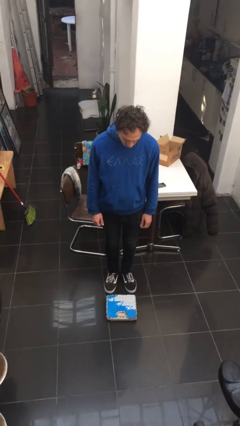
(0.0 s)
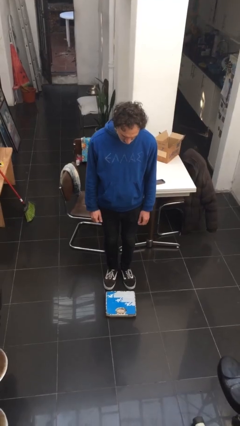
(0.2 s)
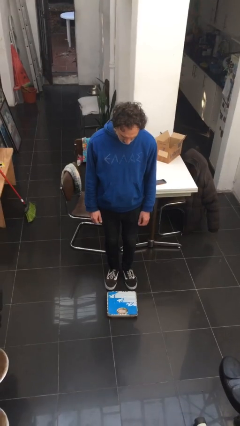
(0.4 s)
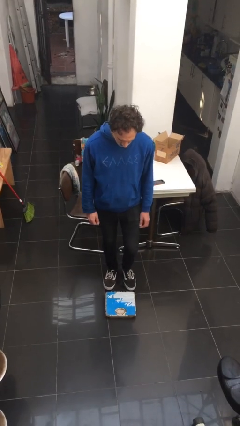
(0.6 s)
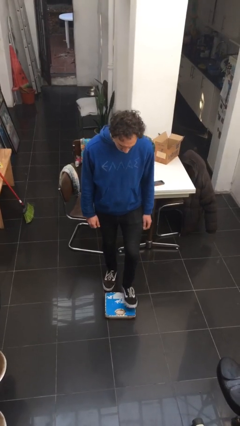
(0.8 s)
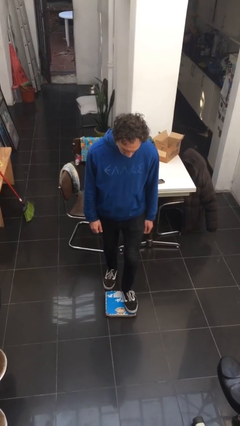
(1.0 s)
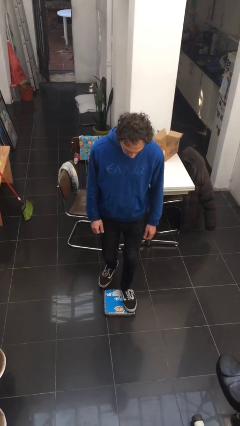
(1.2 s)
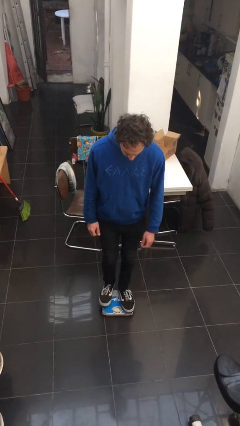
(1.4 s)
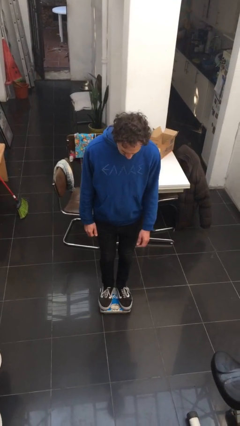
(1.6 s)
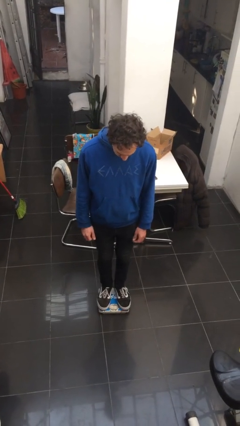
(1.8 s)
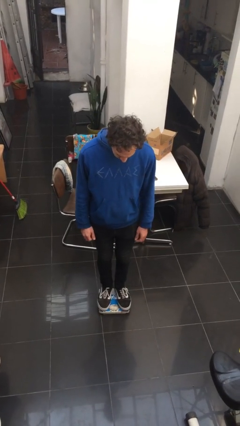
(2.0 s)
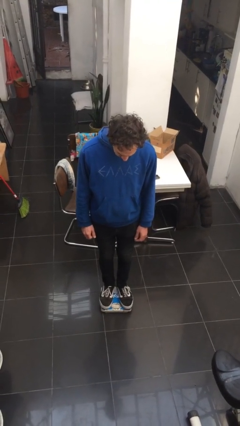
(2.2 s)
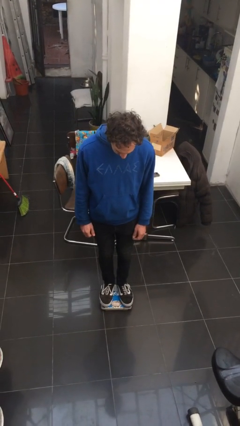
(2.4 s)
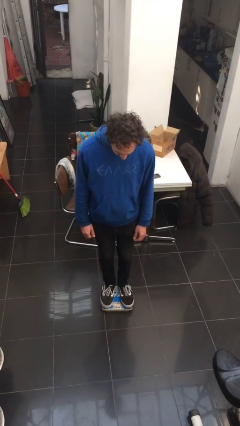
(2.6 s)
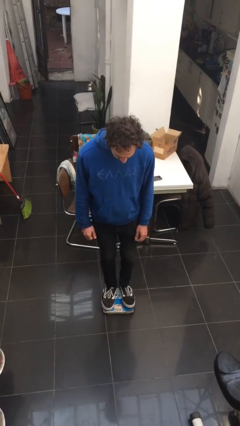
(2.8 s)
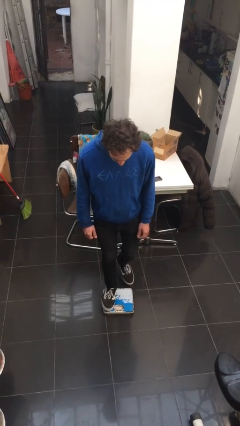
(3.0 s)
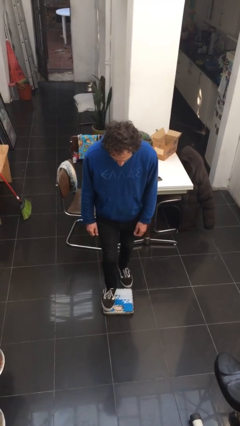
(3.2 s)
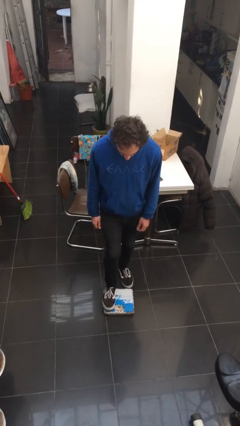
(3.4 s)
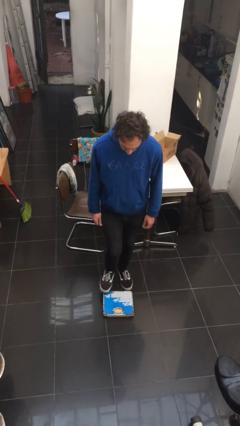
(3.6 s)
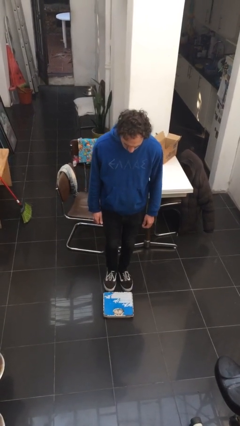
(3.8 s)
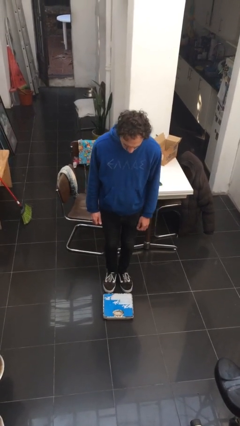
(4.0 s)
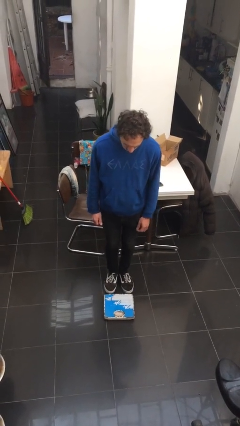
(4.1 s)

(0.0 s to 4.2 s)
person uses bodyweight scale

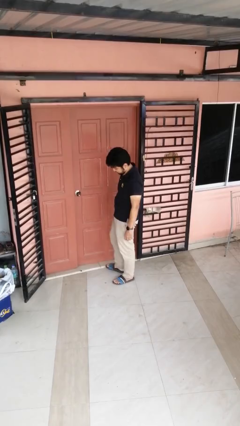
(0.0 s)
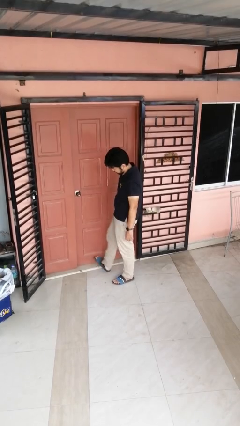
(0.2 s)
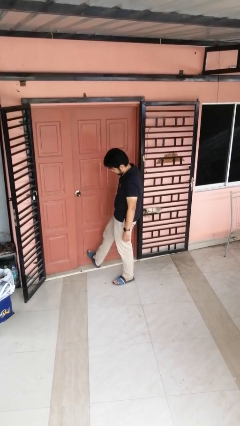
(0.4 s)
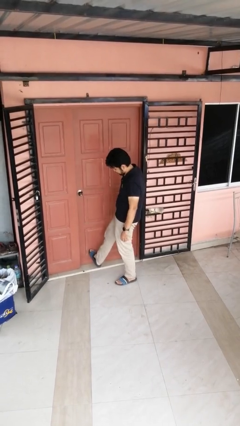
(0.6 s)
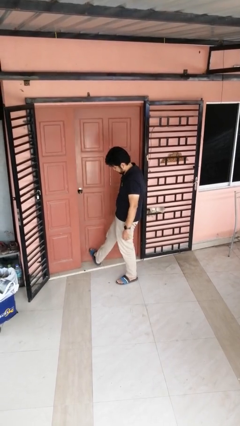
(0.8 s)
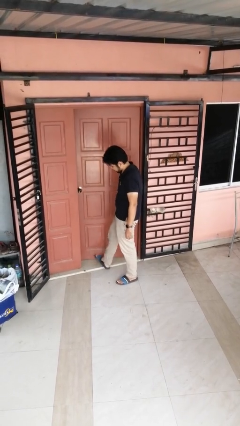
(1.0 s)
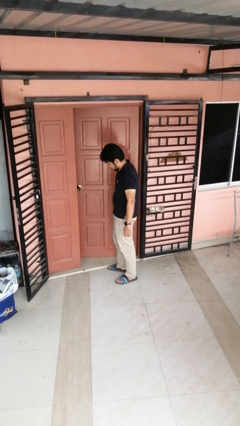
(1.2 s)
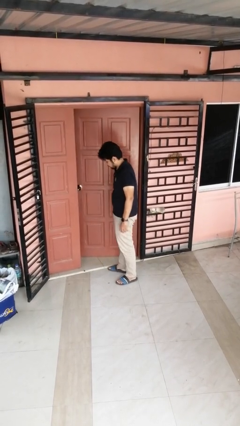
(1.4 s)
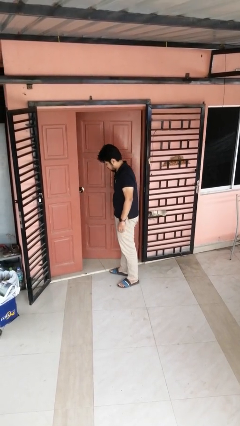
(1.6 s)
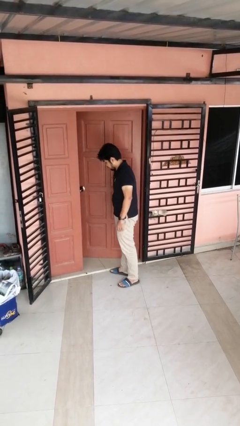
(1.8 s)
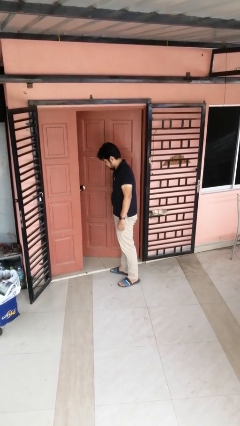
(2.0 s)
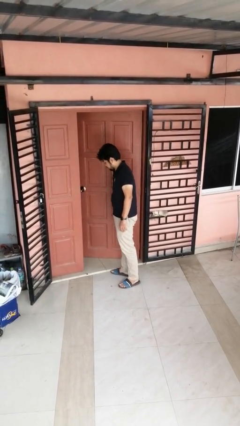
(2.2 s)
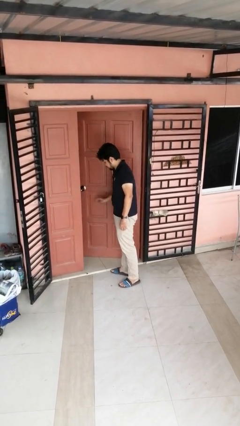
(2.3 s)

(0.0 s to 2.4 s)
person opens facility door

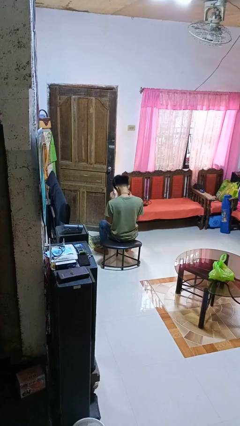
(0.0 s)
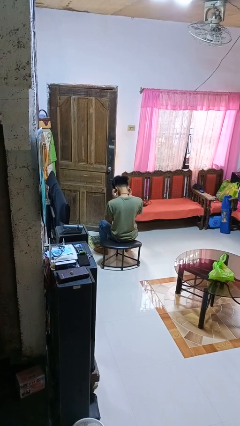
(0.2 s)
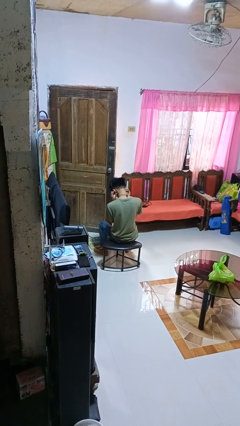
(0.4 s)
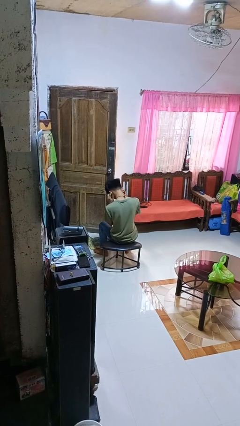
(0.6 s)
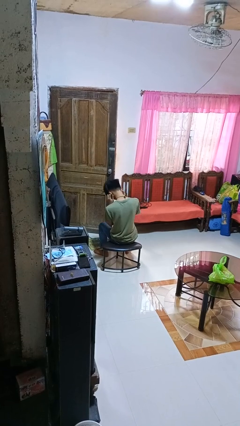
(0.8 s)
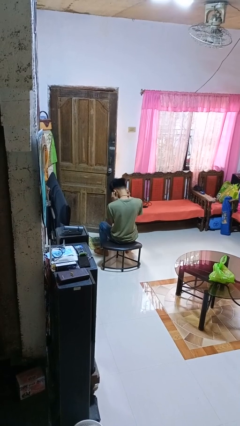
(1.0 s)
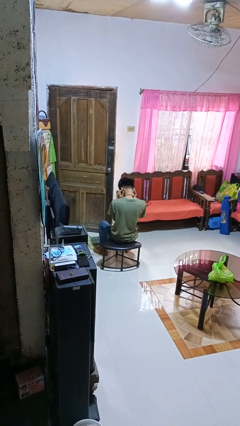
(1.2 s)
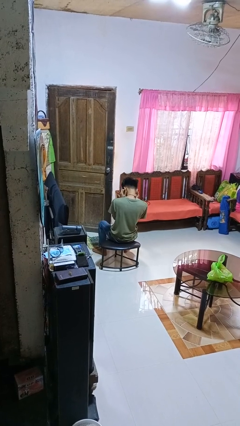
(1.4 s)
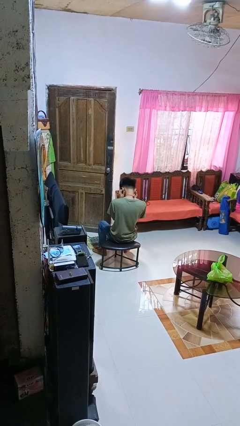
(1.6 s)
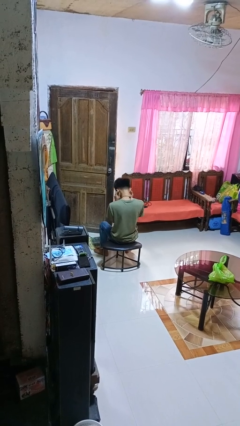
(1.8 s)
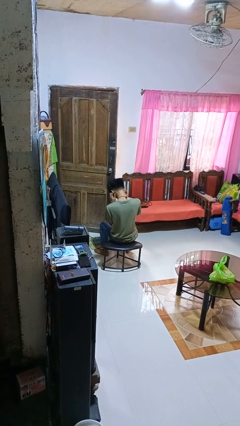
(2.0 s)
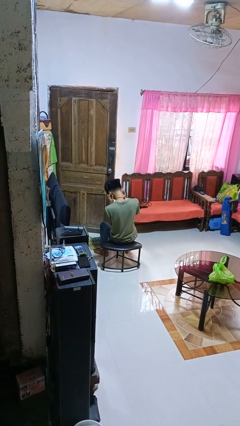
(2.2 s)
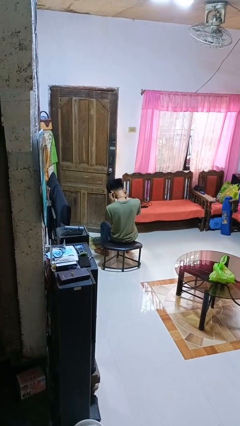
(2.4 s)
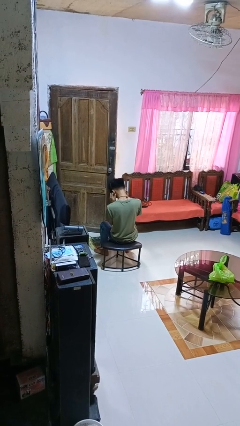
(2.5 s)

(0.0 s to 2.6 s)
person puts fingers in ear

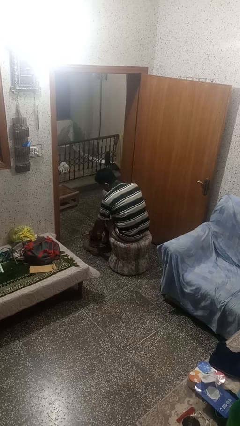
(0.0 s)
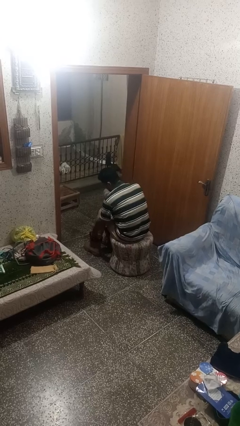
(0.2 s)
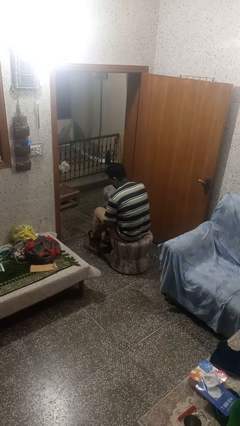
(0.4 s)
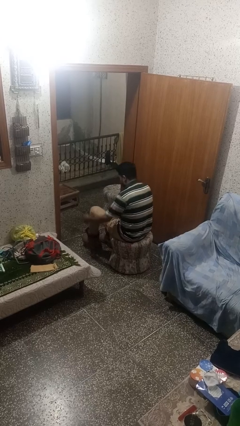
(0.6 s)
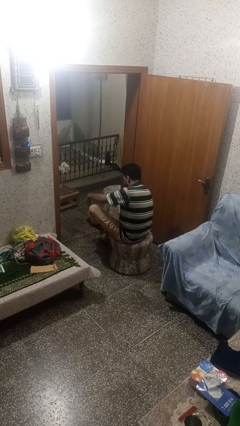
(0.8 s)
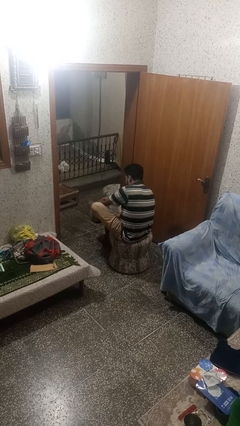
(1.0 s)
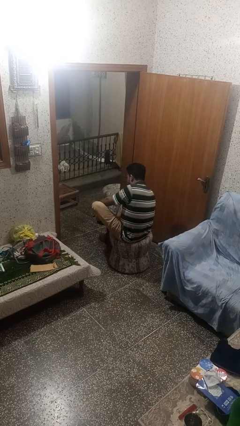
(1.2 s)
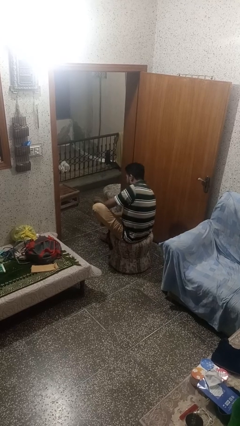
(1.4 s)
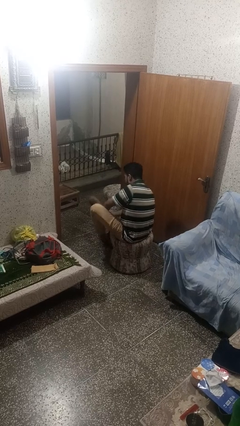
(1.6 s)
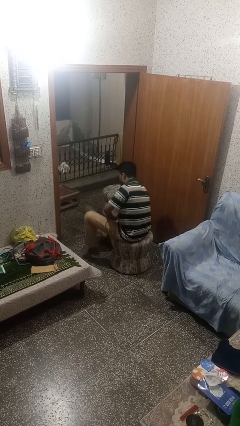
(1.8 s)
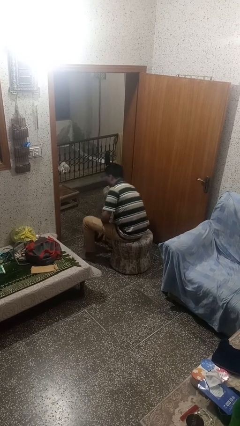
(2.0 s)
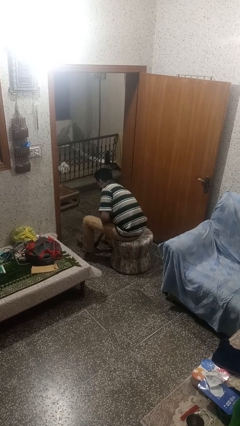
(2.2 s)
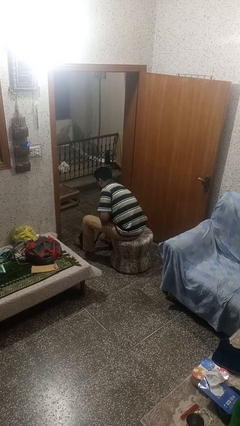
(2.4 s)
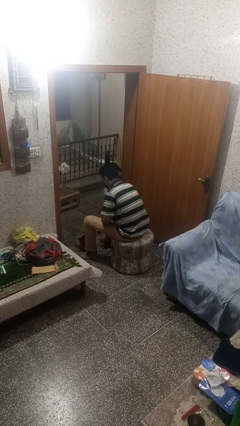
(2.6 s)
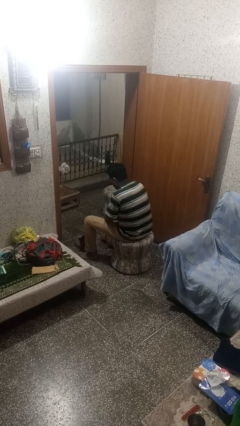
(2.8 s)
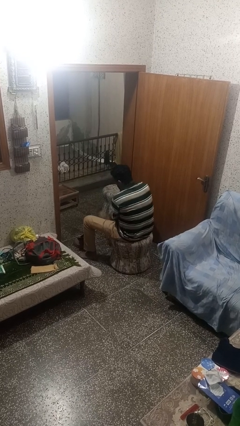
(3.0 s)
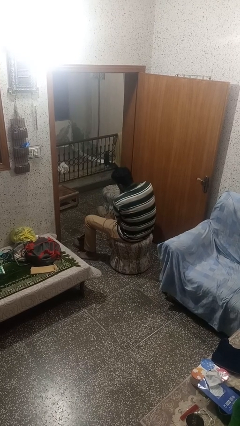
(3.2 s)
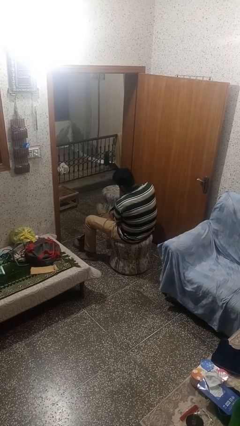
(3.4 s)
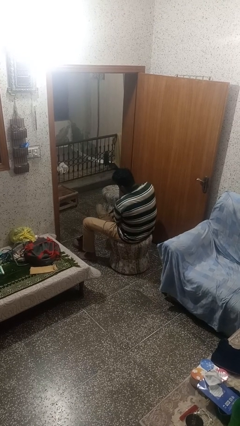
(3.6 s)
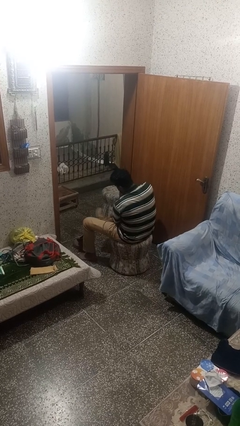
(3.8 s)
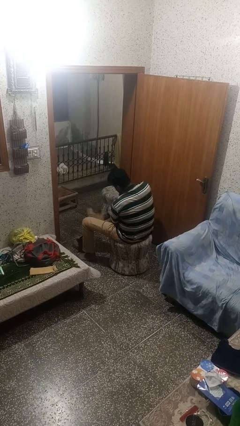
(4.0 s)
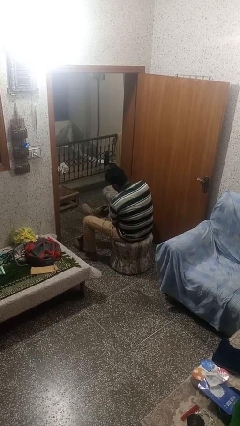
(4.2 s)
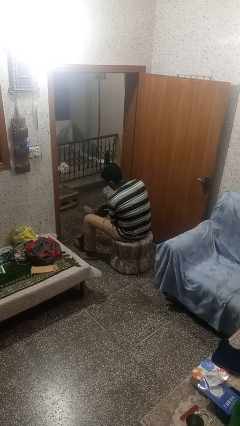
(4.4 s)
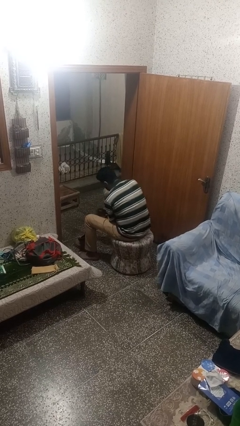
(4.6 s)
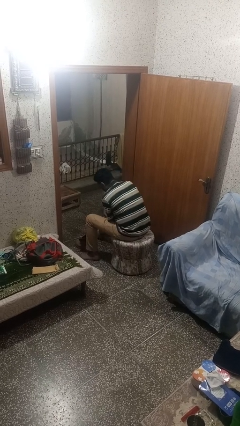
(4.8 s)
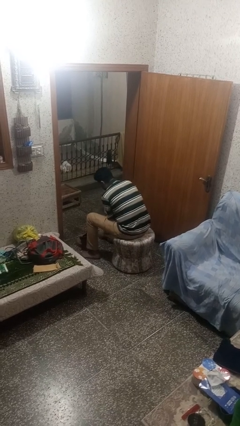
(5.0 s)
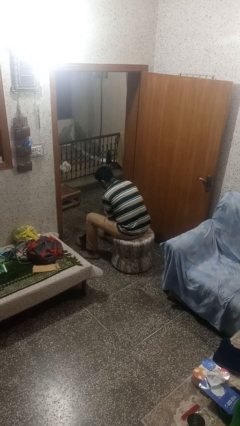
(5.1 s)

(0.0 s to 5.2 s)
person takes off shoes

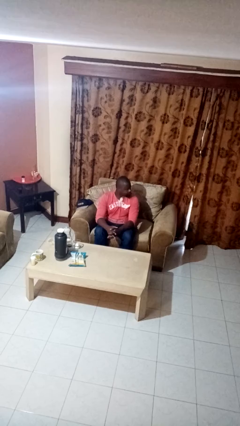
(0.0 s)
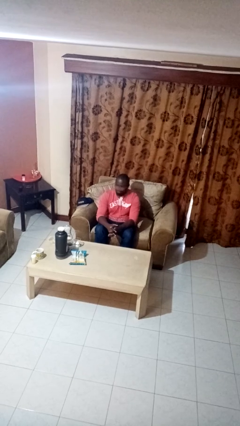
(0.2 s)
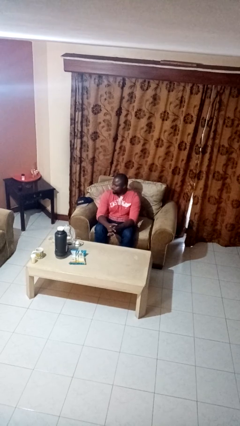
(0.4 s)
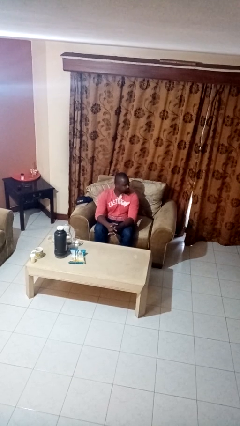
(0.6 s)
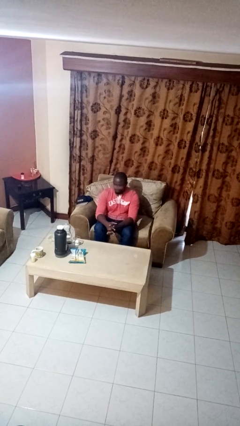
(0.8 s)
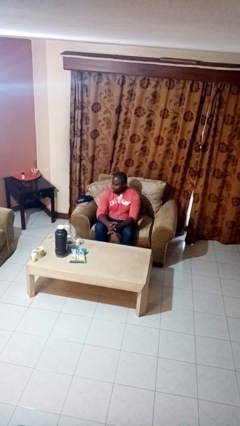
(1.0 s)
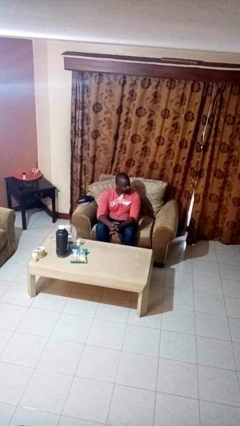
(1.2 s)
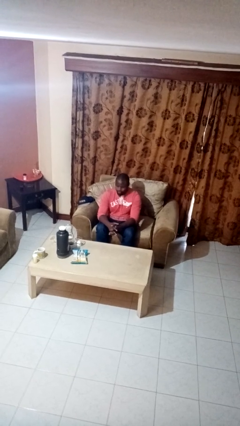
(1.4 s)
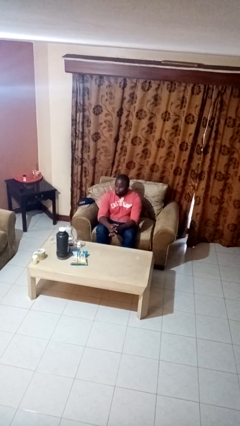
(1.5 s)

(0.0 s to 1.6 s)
person shakes head

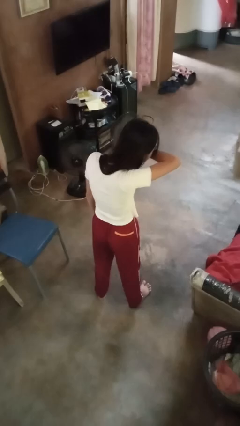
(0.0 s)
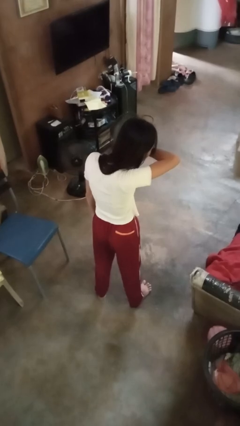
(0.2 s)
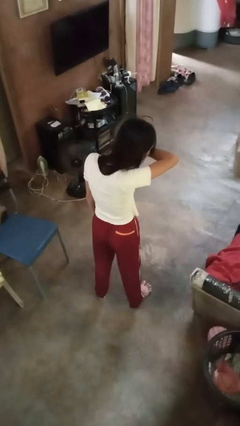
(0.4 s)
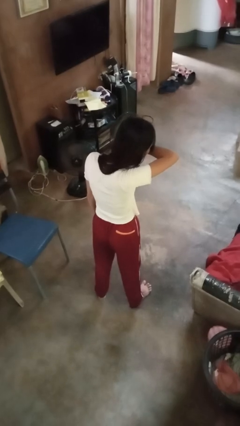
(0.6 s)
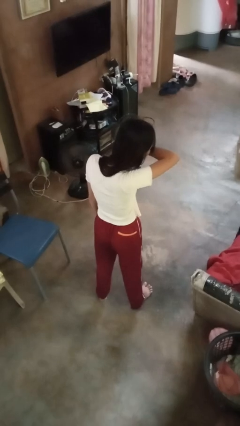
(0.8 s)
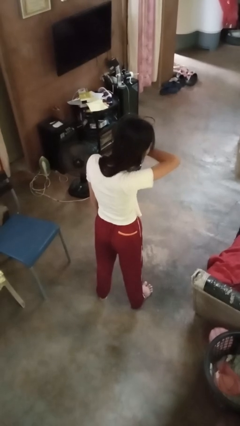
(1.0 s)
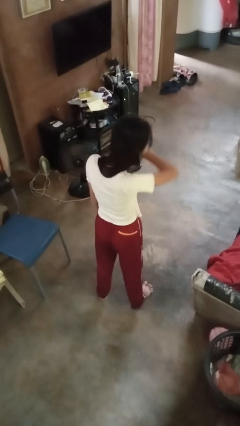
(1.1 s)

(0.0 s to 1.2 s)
person sneezes into arm

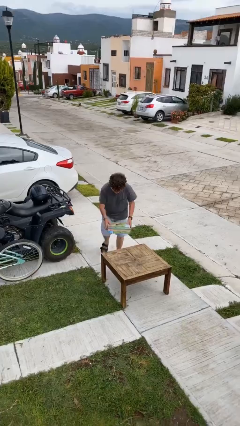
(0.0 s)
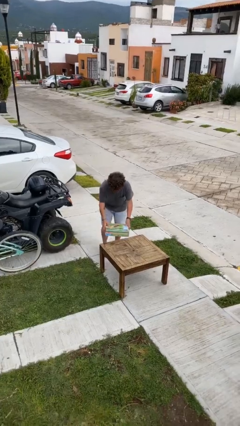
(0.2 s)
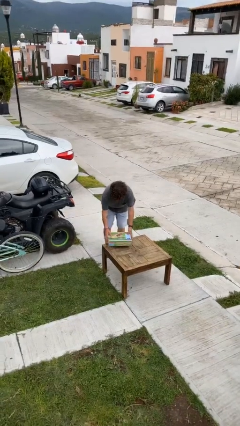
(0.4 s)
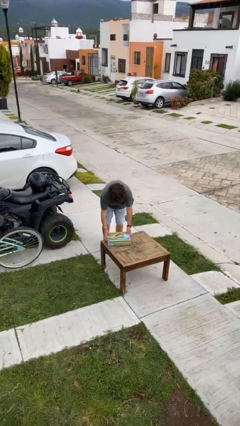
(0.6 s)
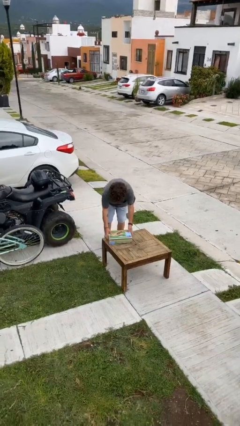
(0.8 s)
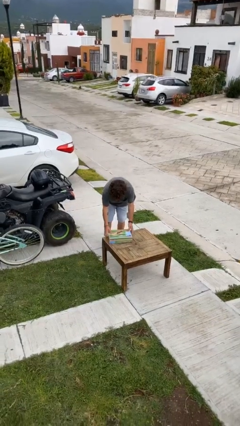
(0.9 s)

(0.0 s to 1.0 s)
person puts down object on table
